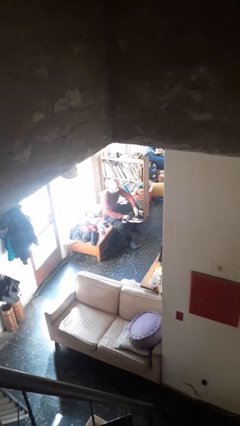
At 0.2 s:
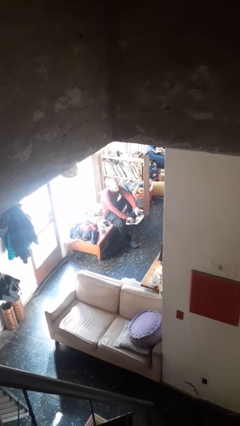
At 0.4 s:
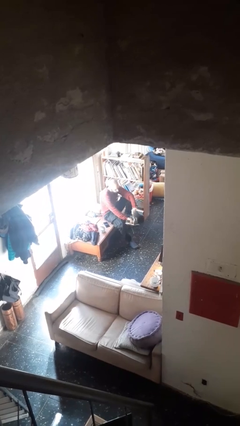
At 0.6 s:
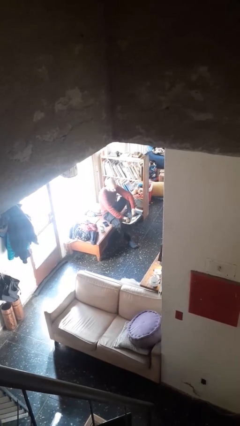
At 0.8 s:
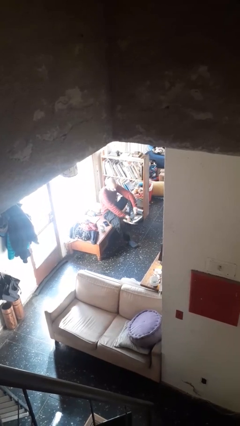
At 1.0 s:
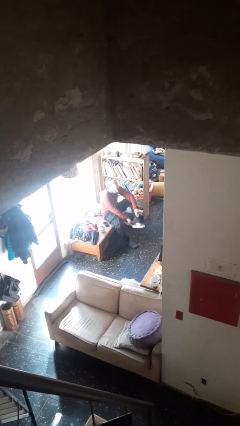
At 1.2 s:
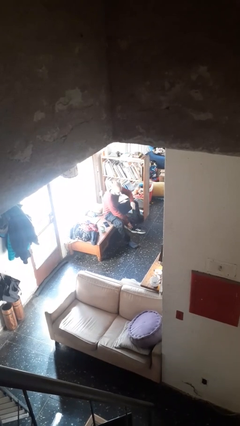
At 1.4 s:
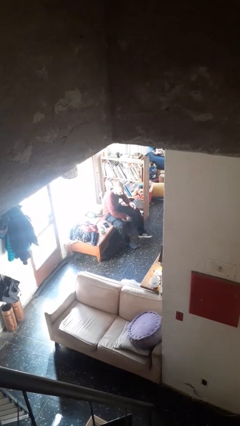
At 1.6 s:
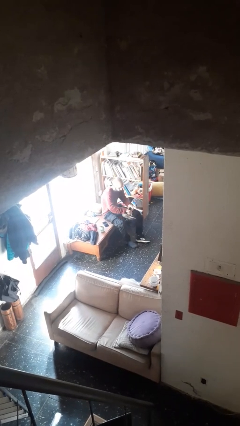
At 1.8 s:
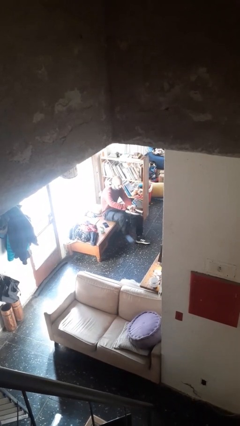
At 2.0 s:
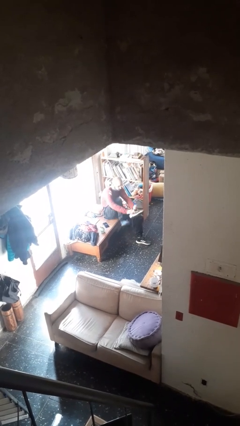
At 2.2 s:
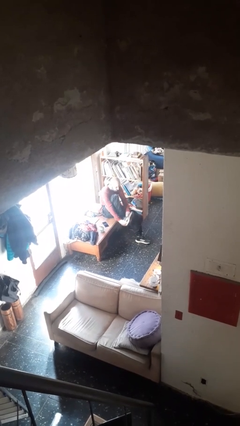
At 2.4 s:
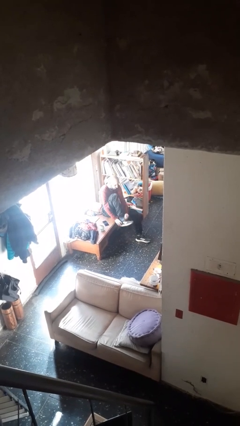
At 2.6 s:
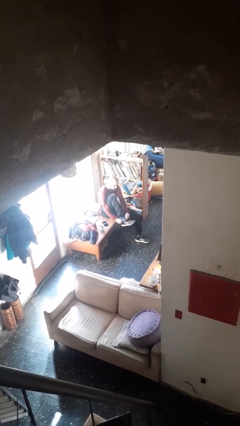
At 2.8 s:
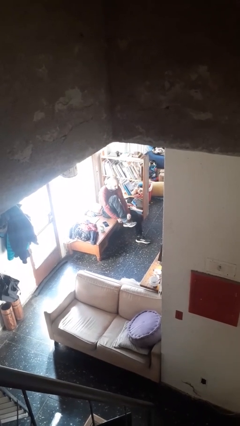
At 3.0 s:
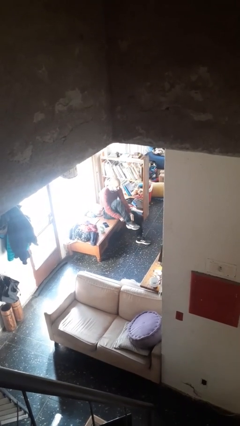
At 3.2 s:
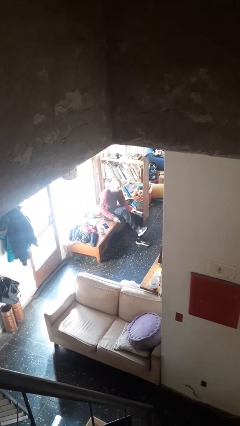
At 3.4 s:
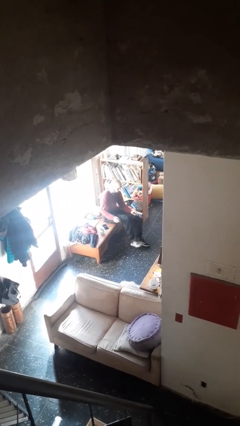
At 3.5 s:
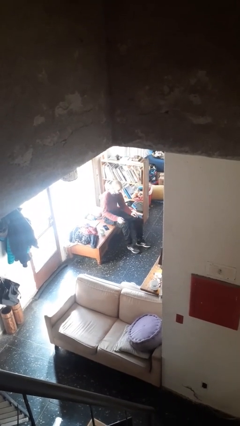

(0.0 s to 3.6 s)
person puts on shoes

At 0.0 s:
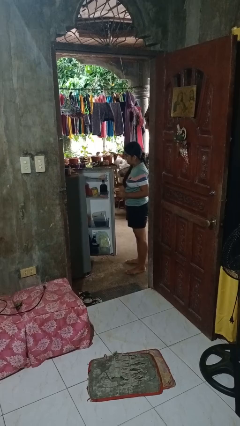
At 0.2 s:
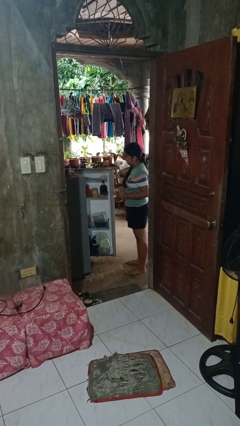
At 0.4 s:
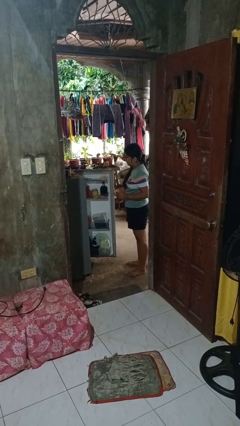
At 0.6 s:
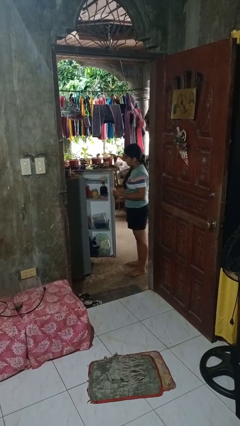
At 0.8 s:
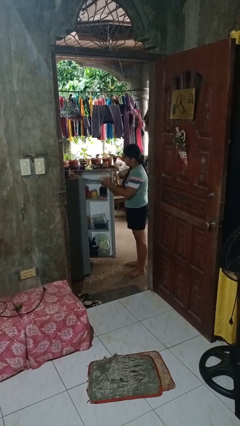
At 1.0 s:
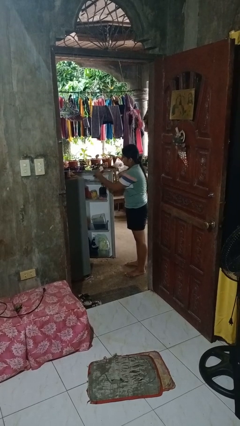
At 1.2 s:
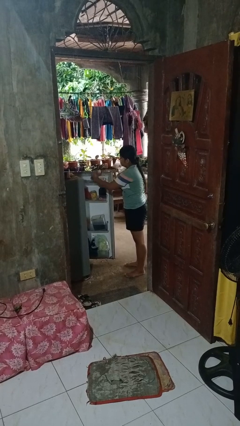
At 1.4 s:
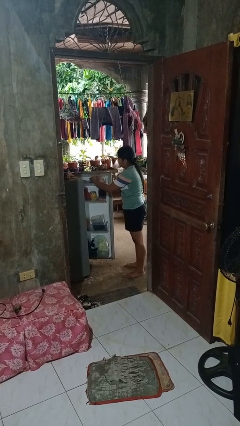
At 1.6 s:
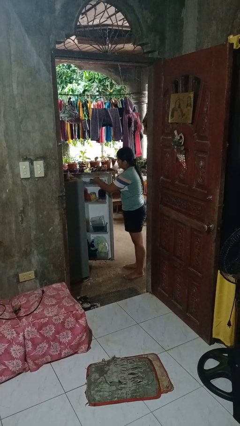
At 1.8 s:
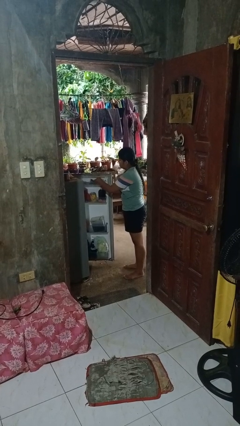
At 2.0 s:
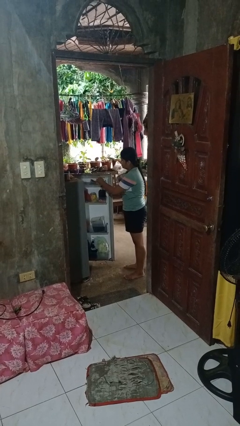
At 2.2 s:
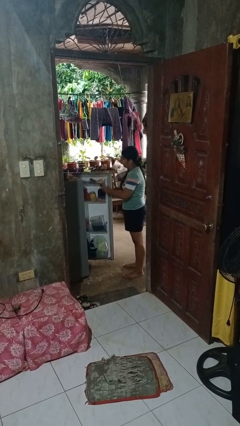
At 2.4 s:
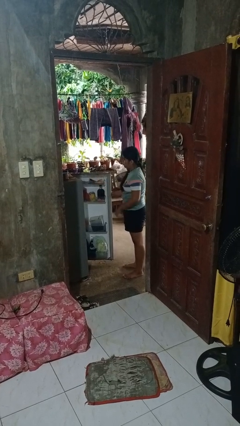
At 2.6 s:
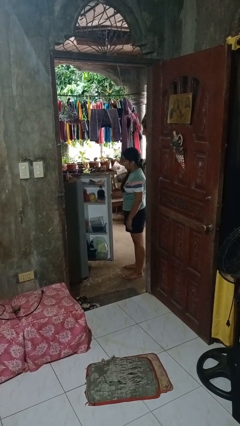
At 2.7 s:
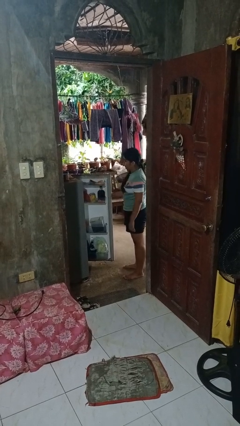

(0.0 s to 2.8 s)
person puts object into refrigerator

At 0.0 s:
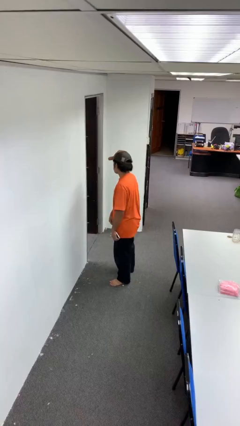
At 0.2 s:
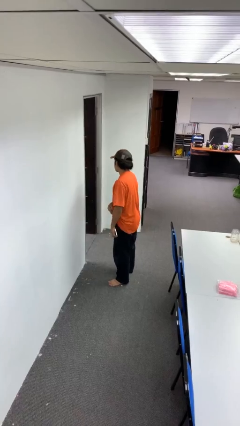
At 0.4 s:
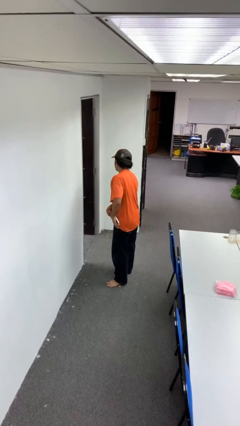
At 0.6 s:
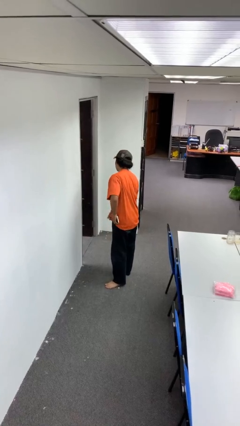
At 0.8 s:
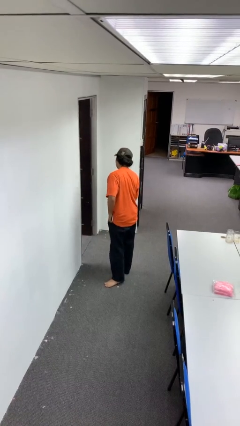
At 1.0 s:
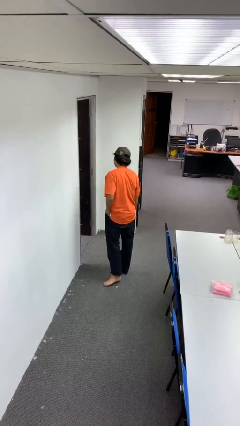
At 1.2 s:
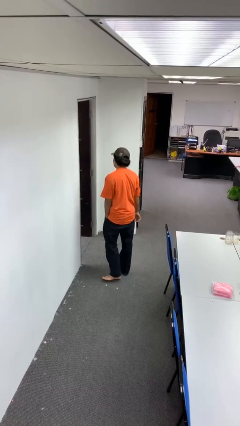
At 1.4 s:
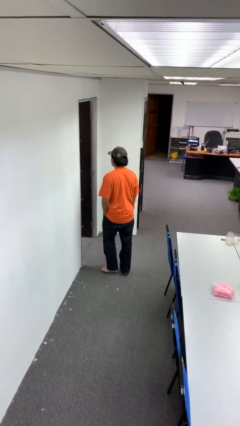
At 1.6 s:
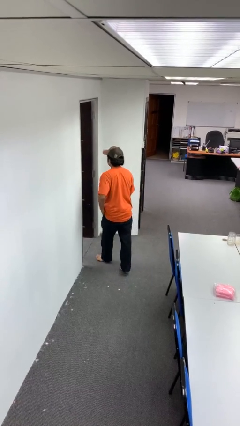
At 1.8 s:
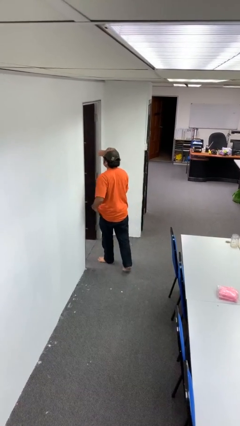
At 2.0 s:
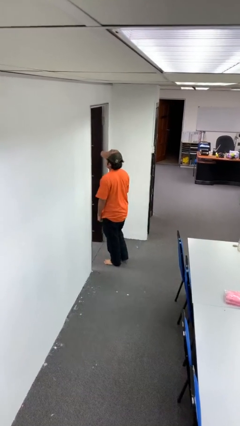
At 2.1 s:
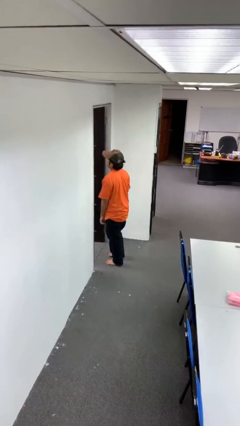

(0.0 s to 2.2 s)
person puts phone into pocket

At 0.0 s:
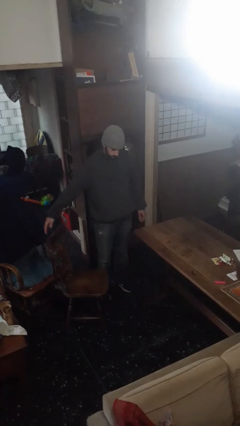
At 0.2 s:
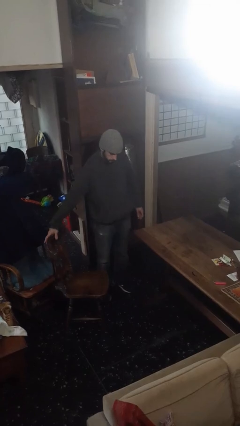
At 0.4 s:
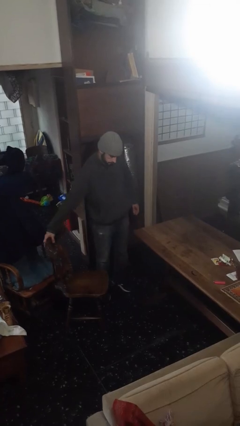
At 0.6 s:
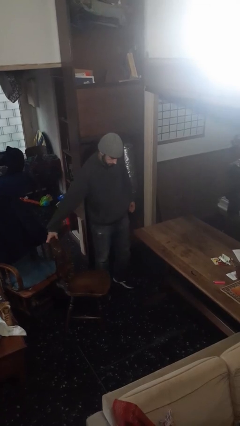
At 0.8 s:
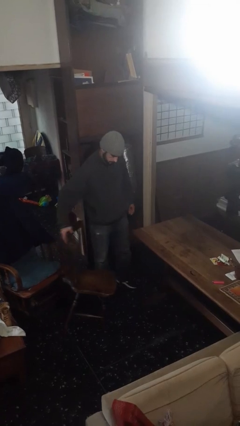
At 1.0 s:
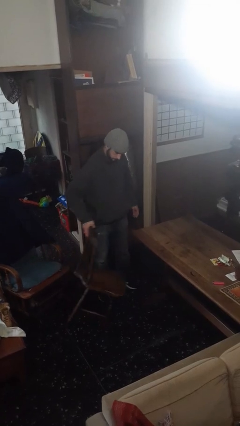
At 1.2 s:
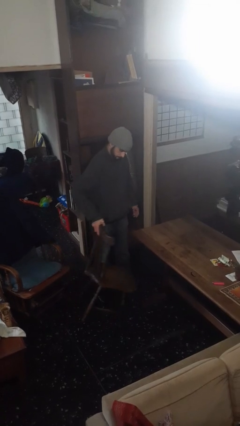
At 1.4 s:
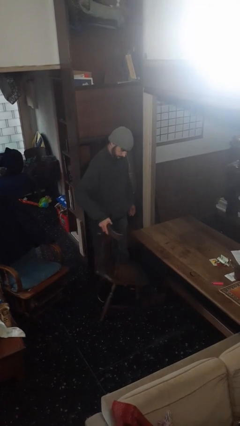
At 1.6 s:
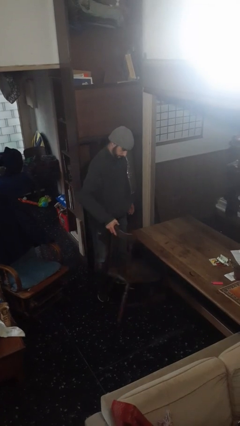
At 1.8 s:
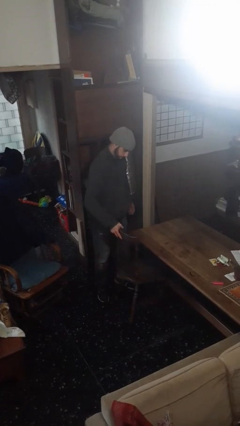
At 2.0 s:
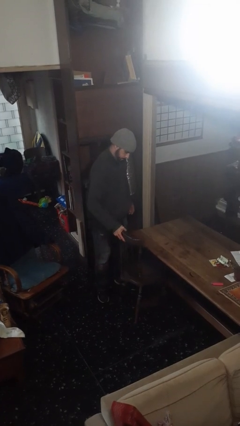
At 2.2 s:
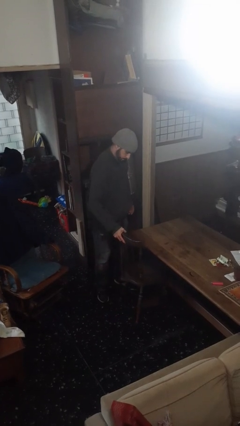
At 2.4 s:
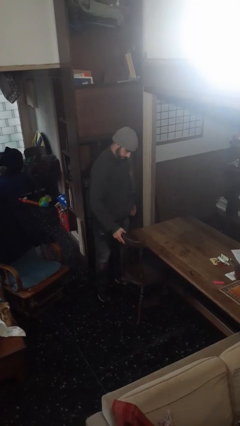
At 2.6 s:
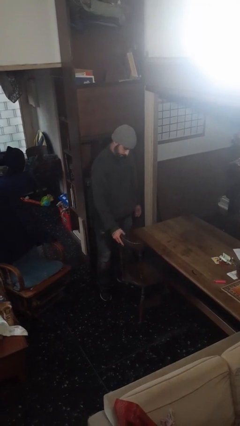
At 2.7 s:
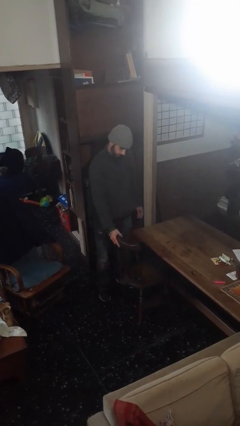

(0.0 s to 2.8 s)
person pushes in chair

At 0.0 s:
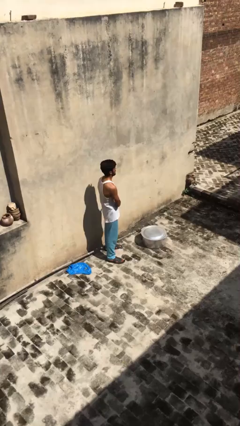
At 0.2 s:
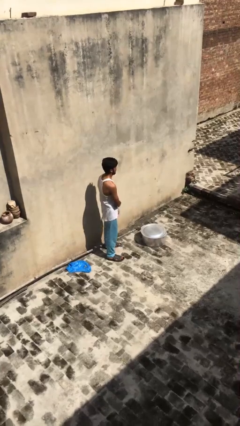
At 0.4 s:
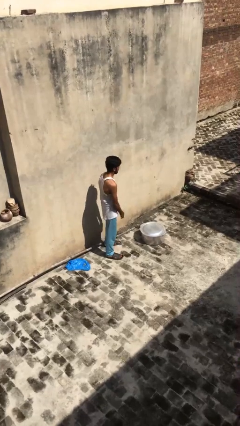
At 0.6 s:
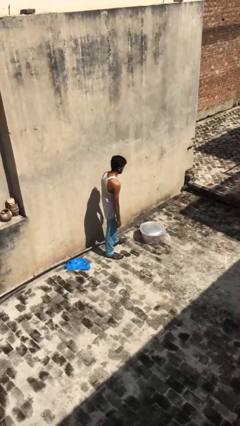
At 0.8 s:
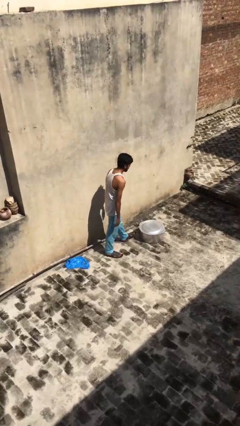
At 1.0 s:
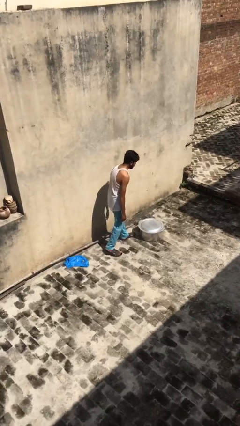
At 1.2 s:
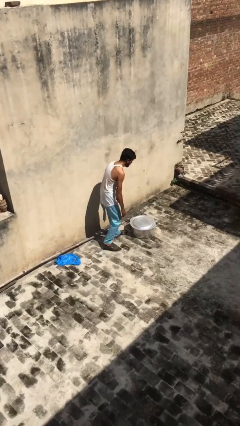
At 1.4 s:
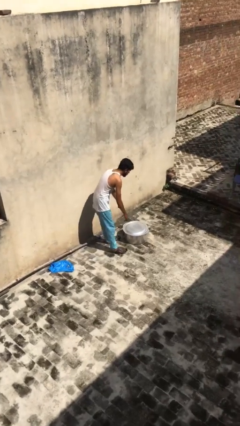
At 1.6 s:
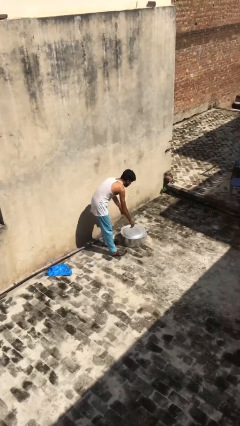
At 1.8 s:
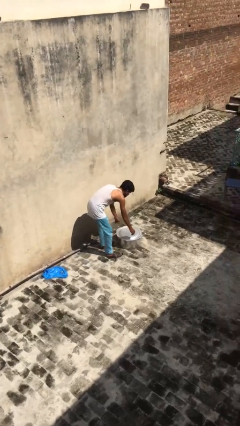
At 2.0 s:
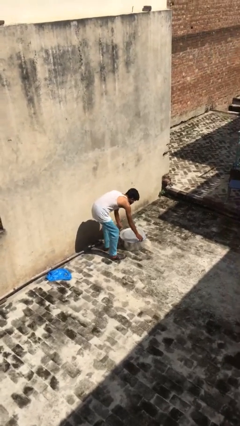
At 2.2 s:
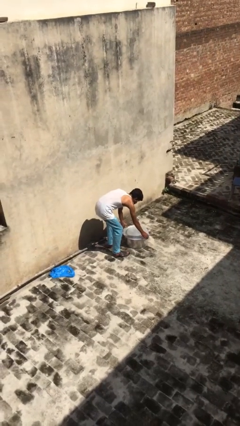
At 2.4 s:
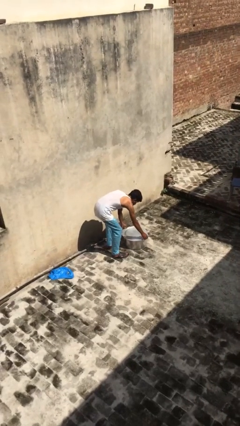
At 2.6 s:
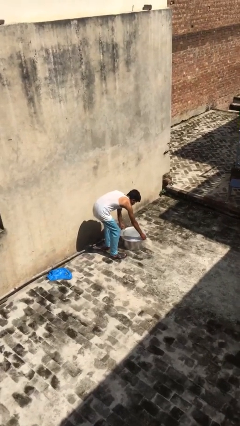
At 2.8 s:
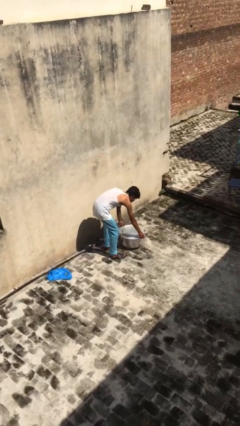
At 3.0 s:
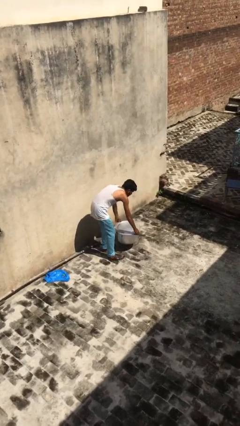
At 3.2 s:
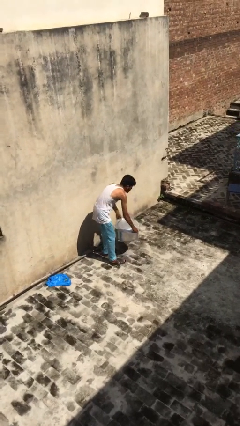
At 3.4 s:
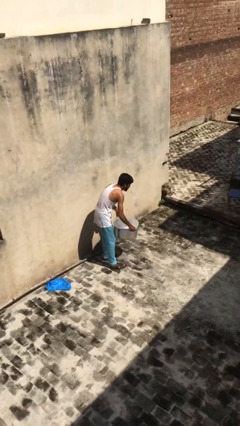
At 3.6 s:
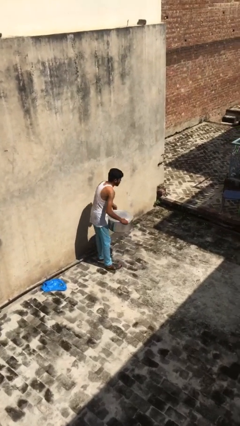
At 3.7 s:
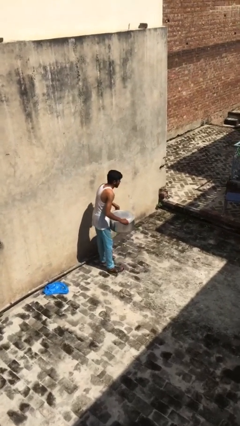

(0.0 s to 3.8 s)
person picks up object from floor

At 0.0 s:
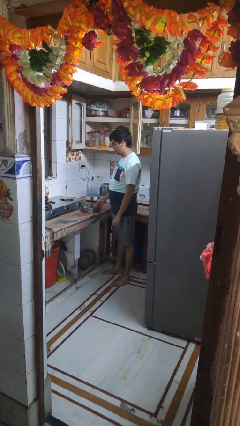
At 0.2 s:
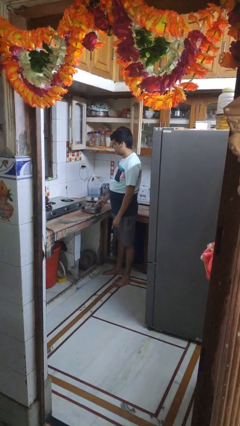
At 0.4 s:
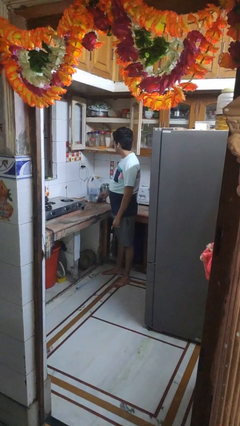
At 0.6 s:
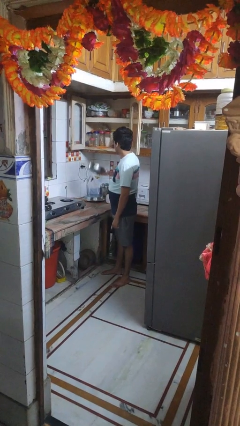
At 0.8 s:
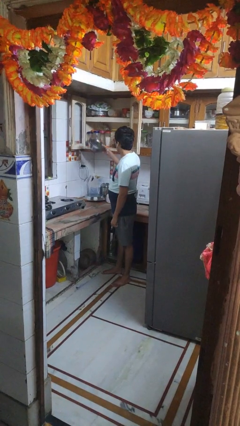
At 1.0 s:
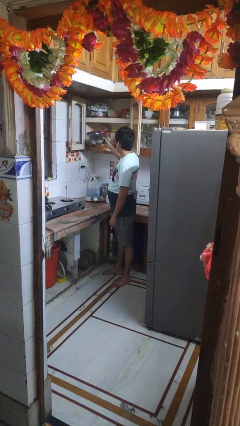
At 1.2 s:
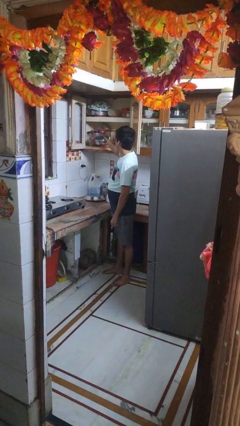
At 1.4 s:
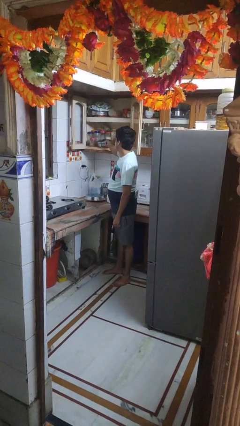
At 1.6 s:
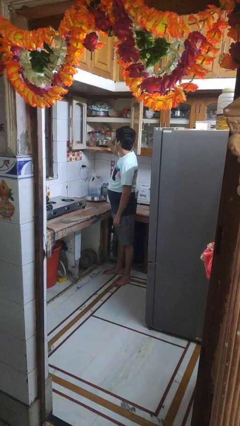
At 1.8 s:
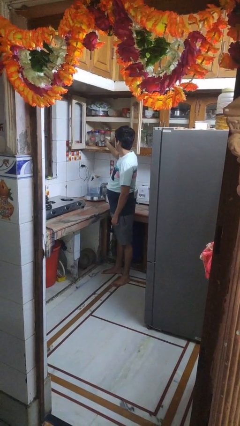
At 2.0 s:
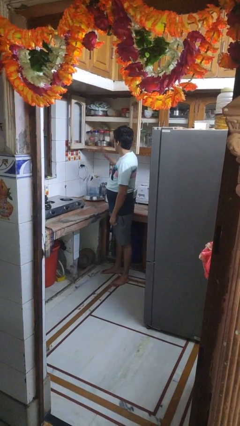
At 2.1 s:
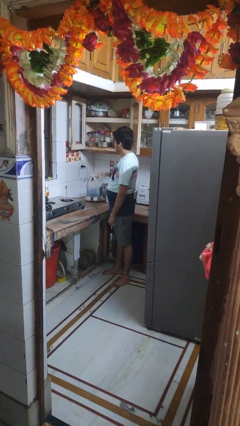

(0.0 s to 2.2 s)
person puts object in cabinet
